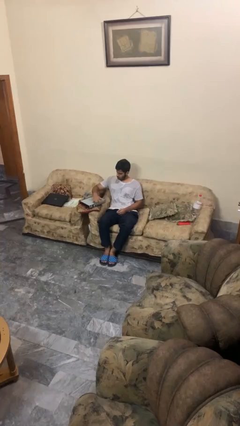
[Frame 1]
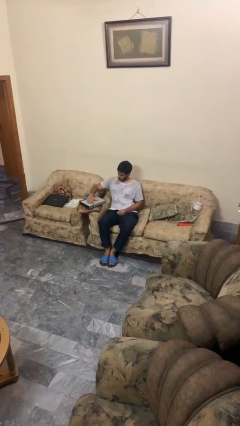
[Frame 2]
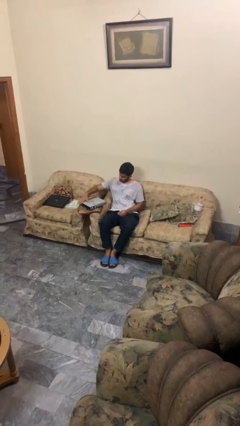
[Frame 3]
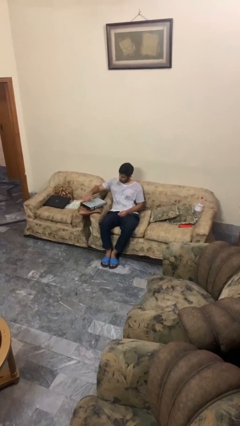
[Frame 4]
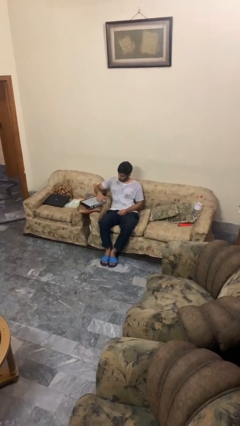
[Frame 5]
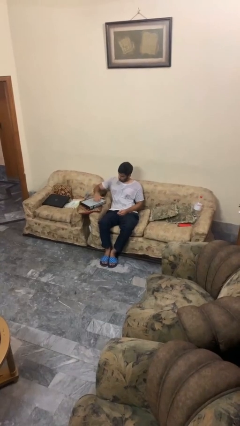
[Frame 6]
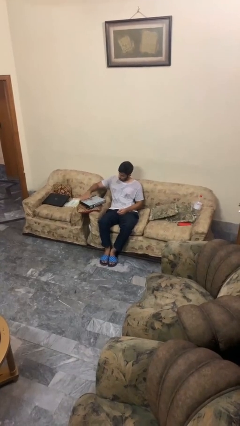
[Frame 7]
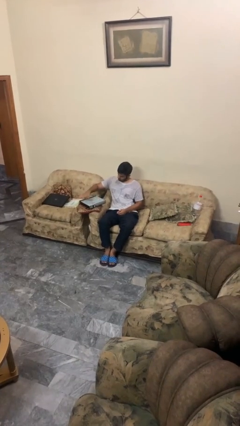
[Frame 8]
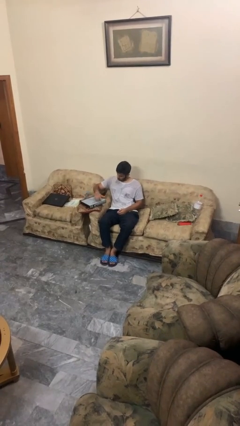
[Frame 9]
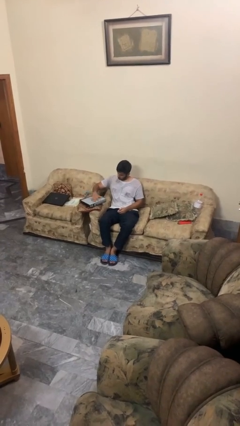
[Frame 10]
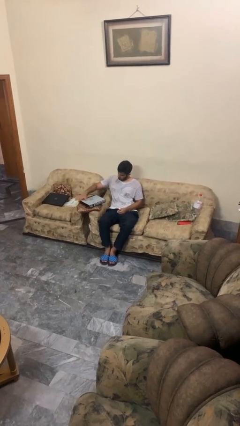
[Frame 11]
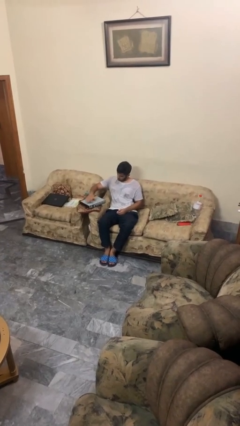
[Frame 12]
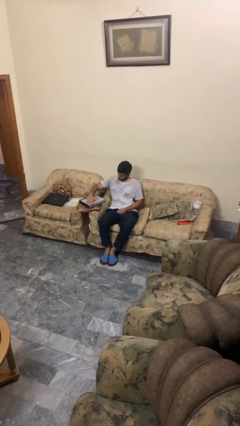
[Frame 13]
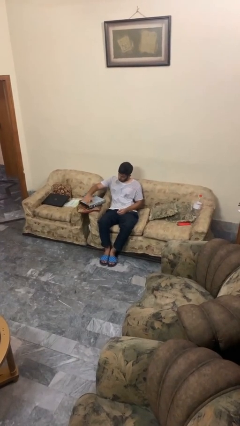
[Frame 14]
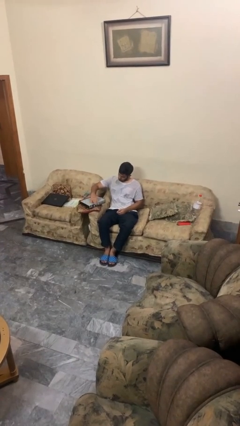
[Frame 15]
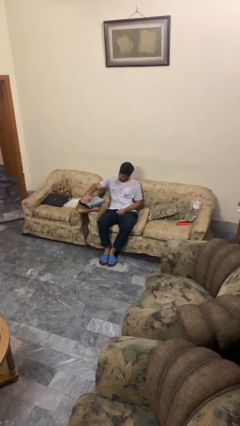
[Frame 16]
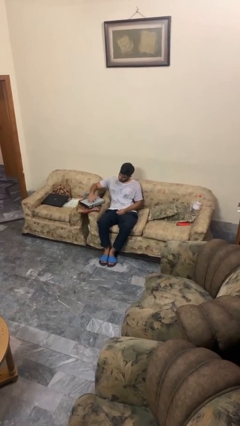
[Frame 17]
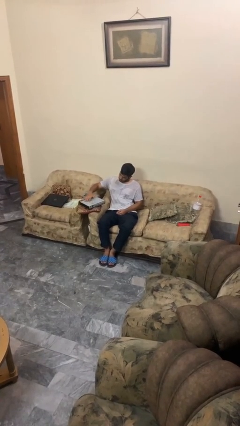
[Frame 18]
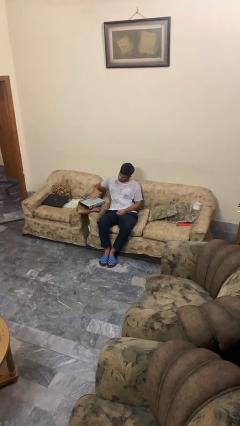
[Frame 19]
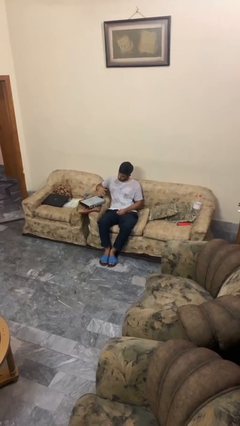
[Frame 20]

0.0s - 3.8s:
person waves hand over object

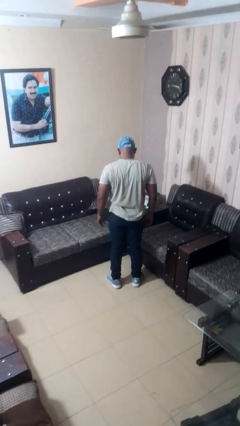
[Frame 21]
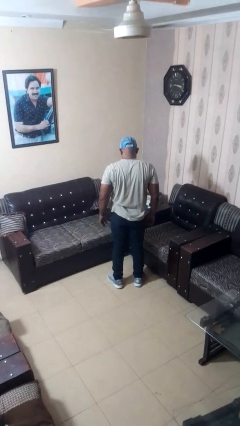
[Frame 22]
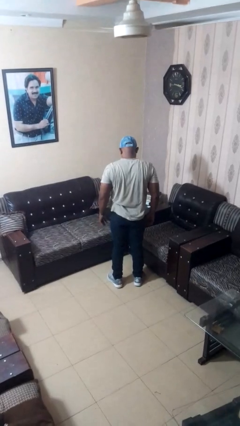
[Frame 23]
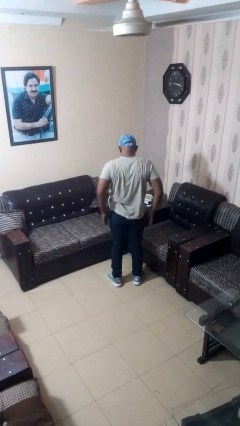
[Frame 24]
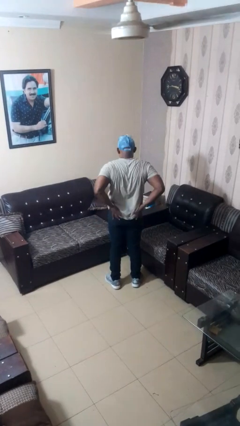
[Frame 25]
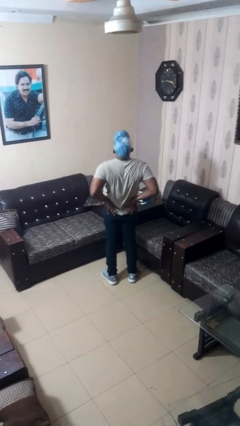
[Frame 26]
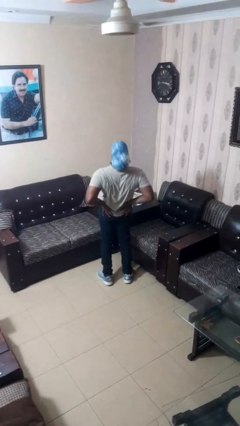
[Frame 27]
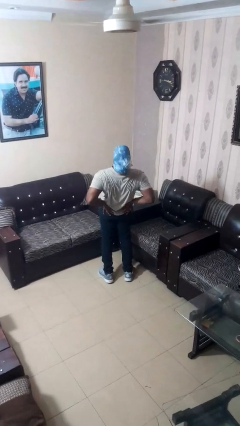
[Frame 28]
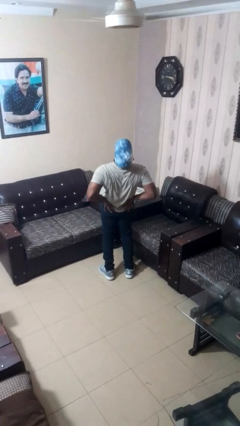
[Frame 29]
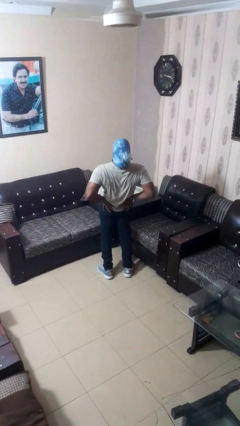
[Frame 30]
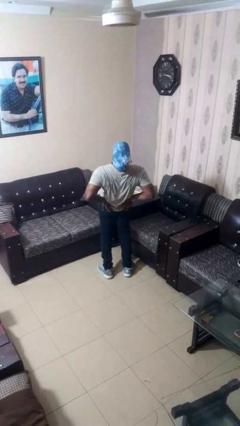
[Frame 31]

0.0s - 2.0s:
person stretches back

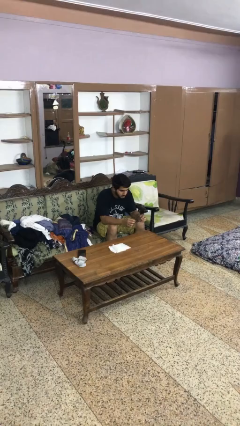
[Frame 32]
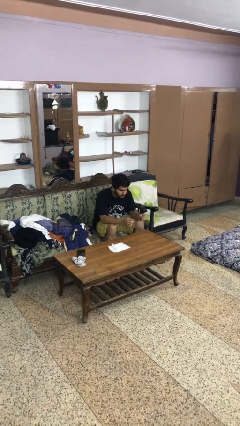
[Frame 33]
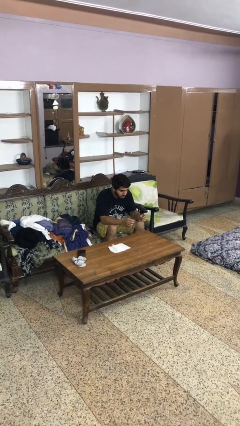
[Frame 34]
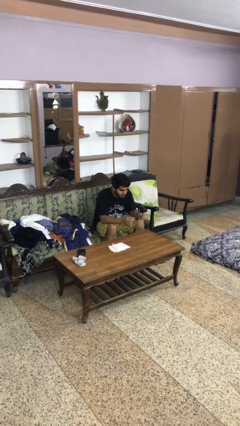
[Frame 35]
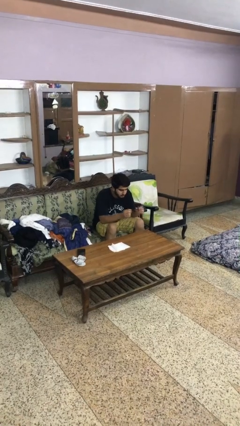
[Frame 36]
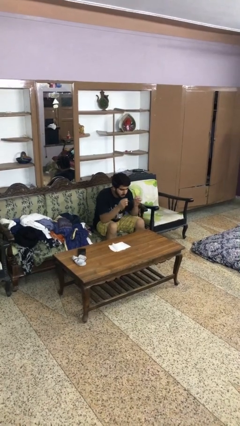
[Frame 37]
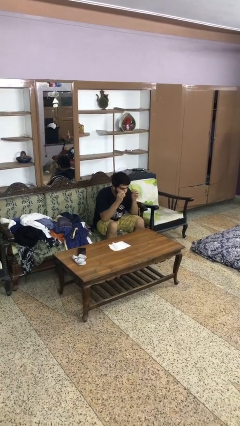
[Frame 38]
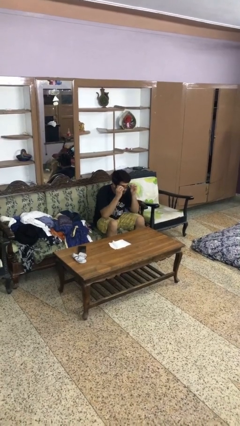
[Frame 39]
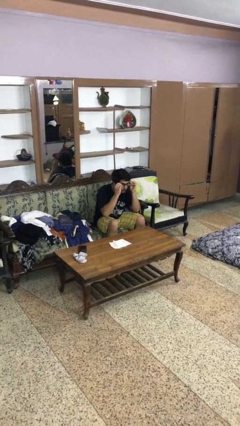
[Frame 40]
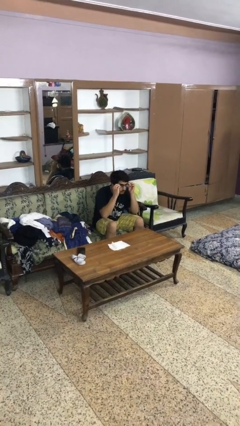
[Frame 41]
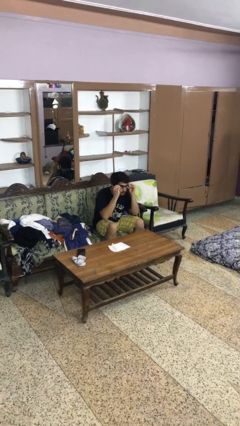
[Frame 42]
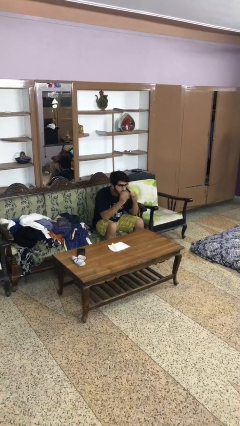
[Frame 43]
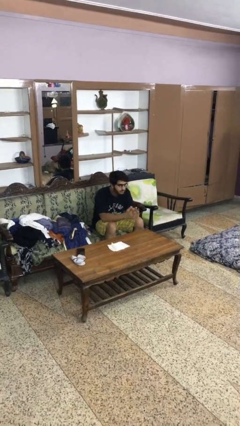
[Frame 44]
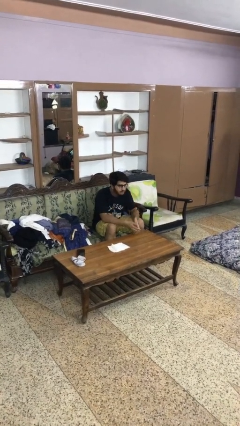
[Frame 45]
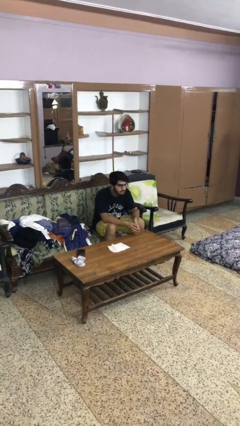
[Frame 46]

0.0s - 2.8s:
person puts on glasses

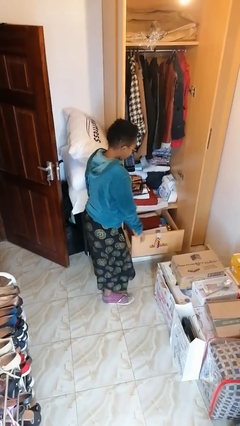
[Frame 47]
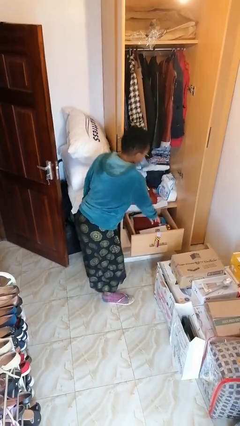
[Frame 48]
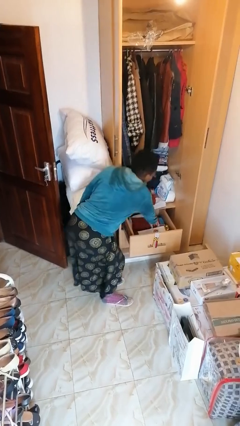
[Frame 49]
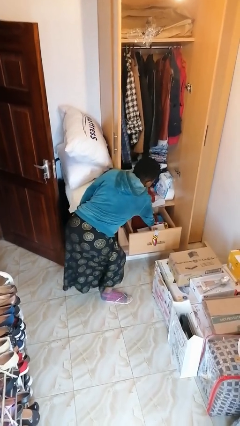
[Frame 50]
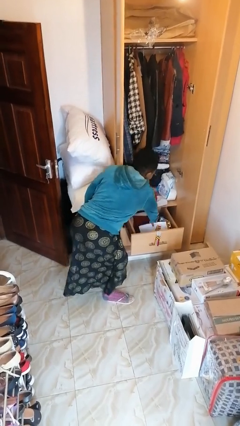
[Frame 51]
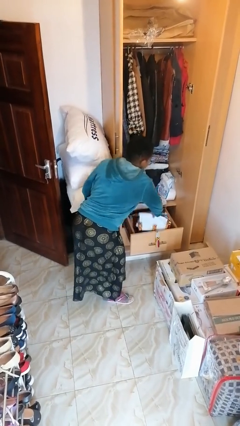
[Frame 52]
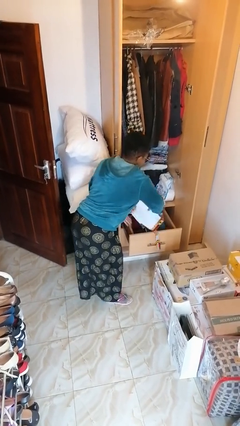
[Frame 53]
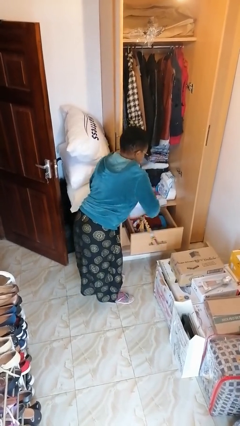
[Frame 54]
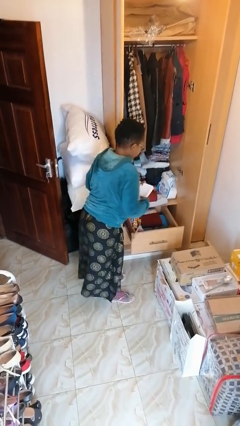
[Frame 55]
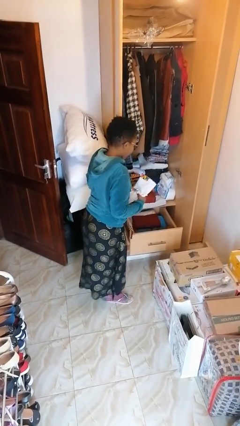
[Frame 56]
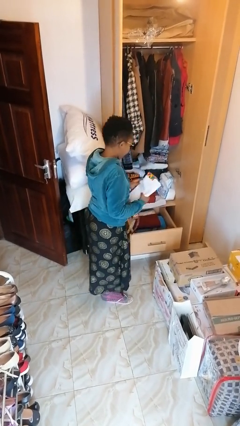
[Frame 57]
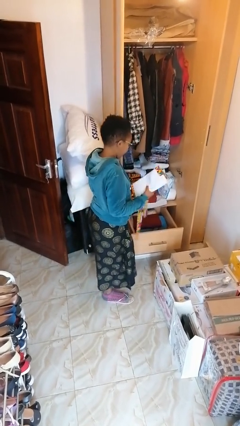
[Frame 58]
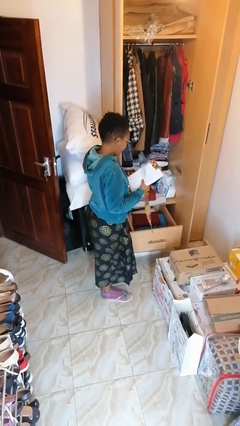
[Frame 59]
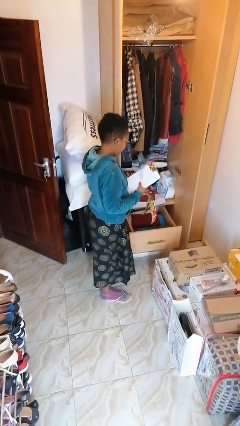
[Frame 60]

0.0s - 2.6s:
person takes clothes from dresser

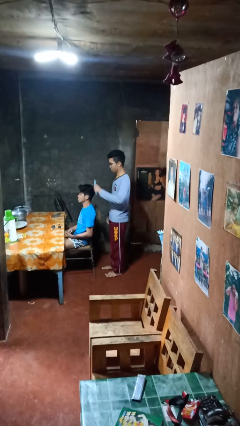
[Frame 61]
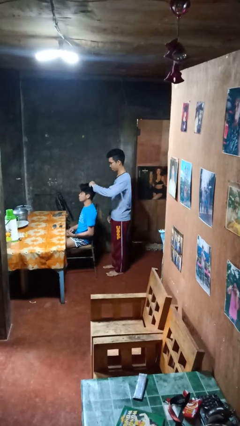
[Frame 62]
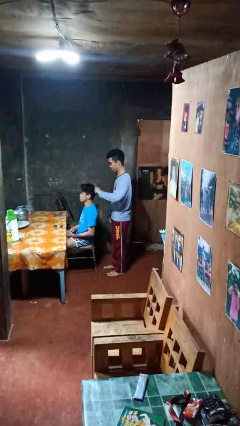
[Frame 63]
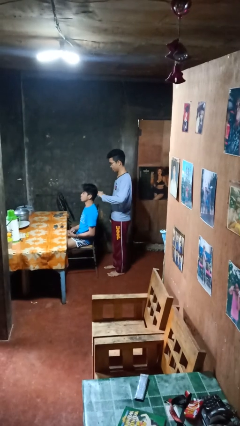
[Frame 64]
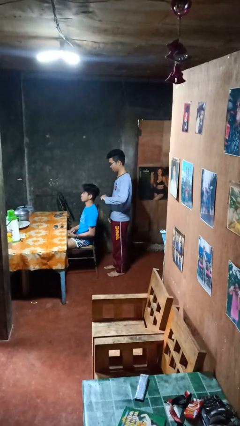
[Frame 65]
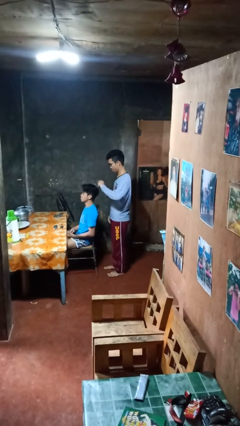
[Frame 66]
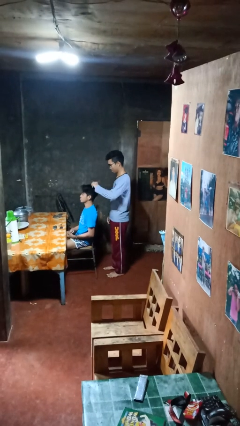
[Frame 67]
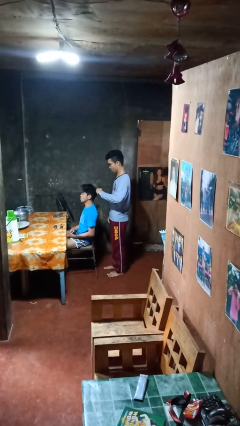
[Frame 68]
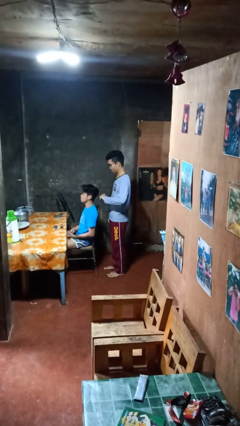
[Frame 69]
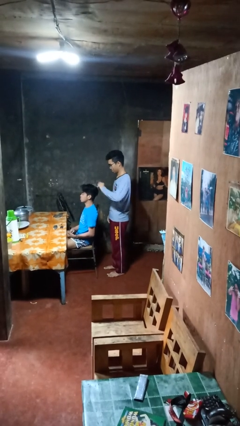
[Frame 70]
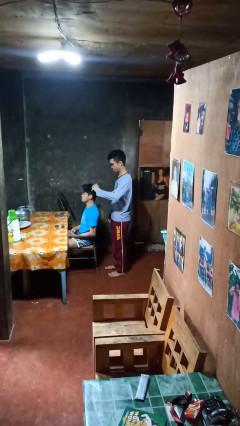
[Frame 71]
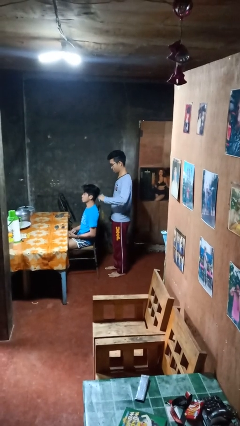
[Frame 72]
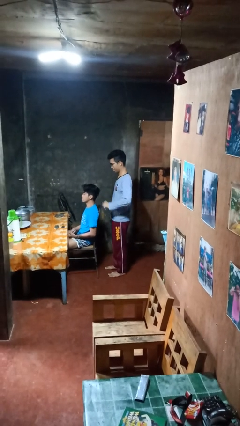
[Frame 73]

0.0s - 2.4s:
person brushes hair of person

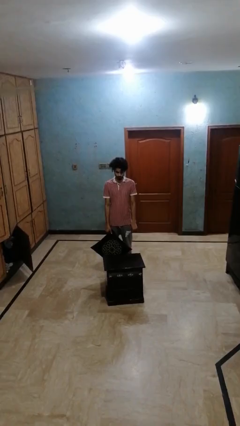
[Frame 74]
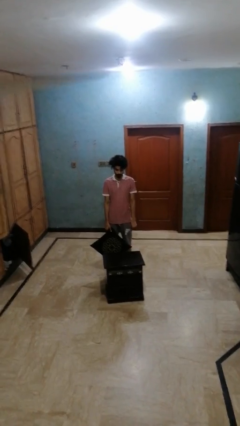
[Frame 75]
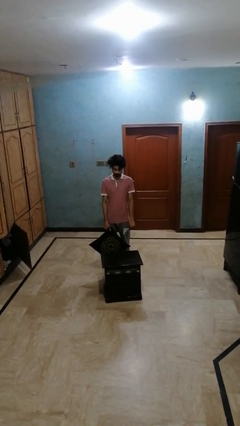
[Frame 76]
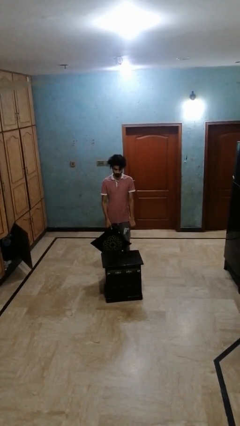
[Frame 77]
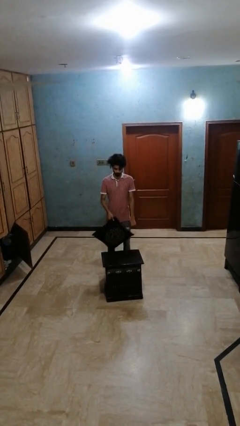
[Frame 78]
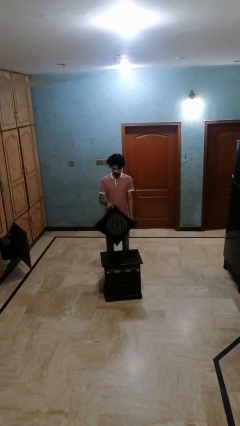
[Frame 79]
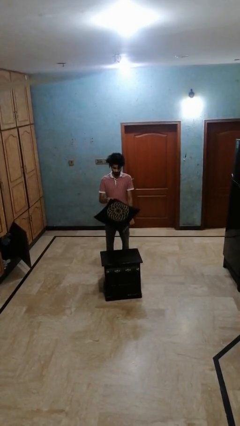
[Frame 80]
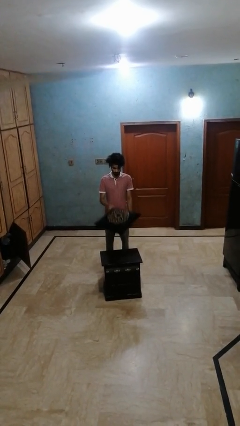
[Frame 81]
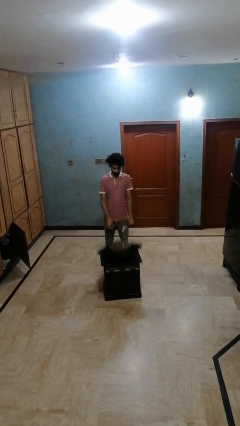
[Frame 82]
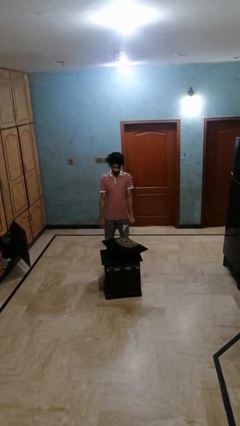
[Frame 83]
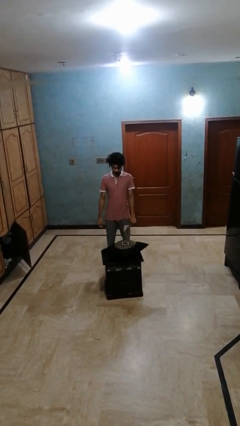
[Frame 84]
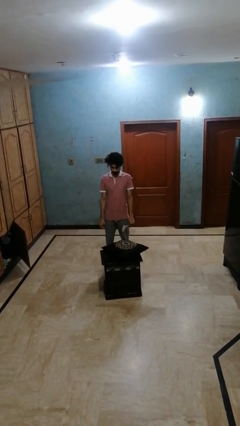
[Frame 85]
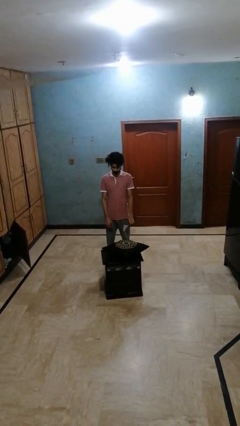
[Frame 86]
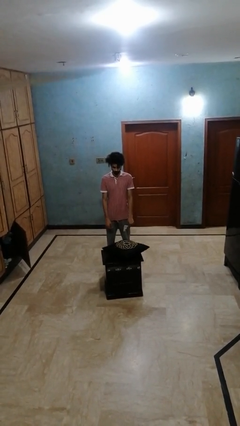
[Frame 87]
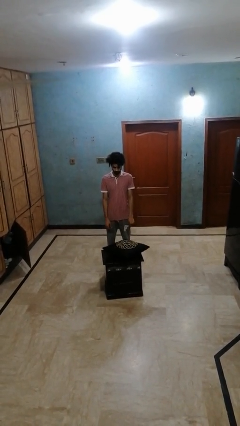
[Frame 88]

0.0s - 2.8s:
person throws object on table

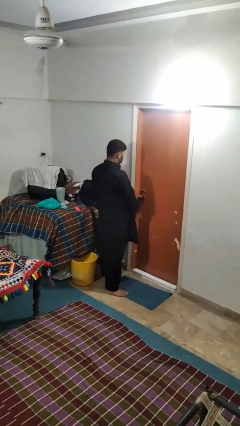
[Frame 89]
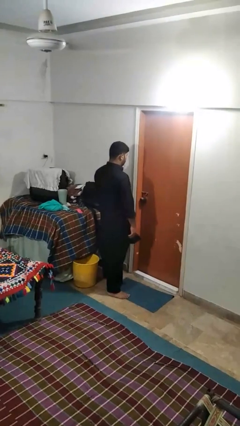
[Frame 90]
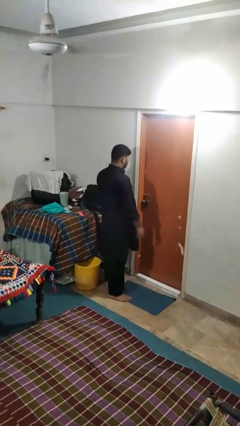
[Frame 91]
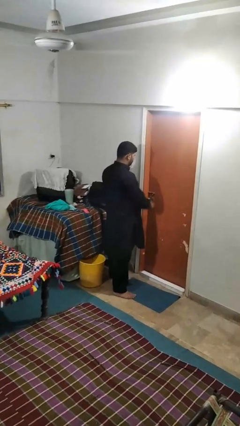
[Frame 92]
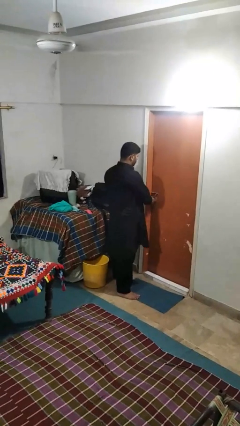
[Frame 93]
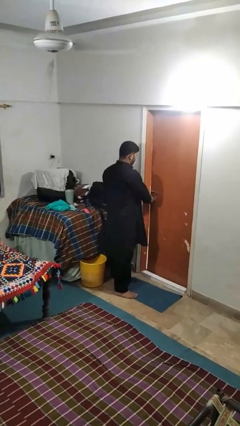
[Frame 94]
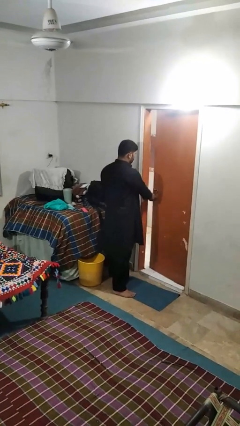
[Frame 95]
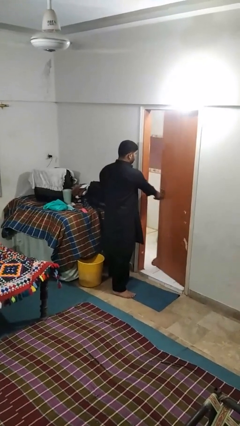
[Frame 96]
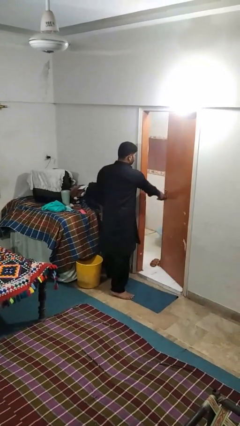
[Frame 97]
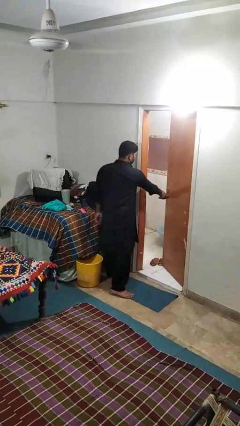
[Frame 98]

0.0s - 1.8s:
person opens facility door
